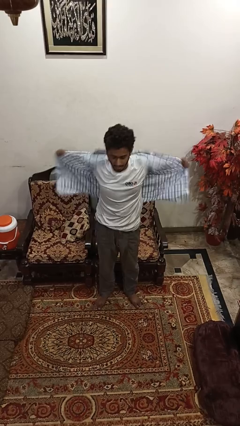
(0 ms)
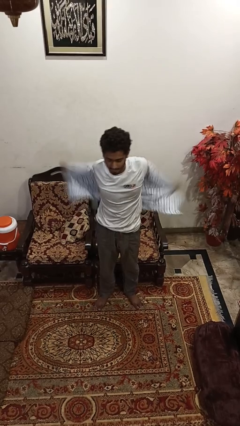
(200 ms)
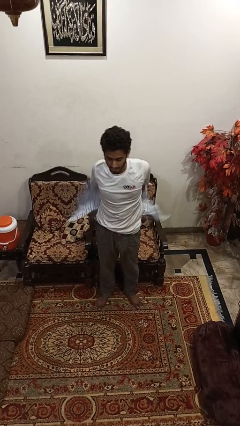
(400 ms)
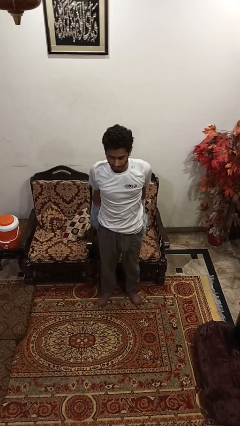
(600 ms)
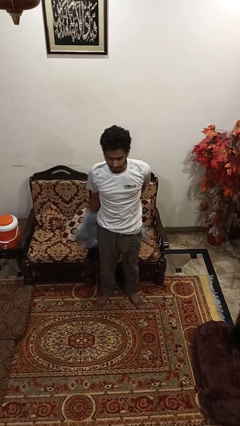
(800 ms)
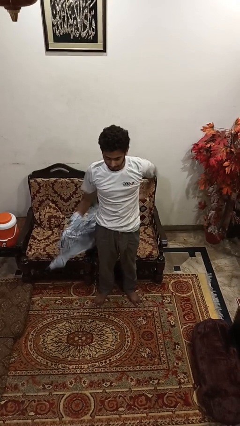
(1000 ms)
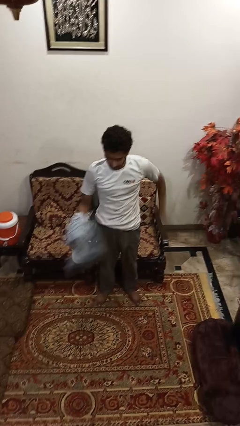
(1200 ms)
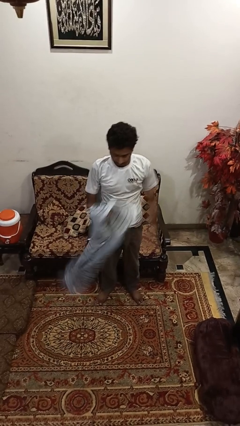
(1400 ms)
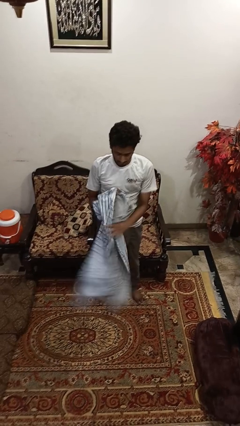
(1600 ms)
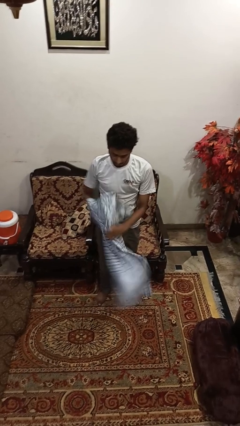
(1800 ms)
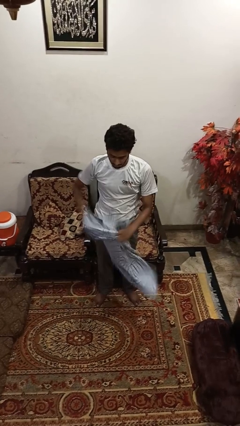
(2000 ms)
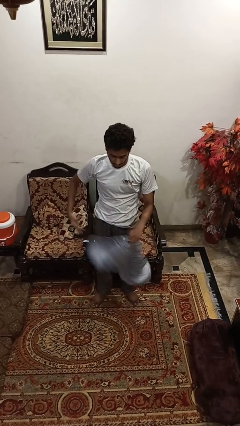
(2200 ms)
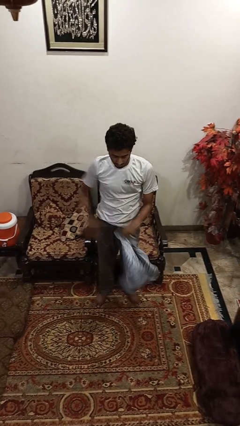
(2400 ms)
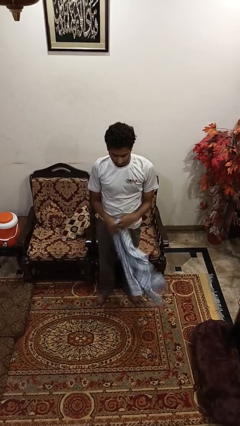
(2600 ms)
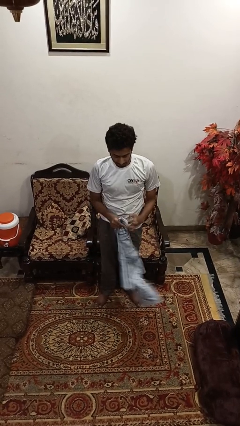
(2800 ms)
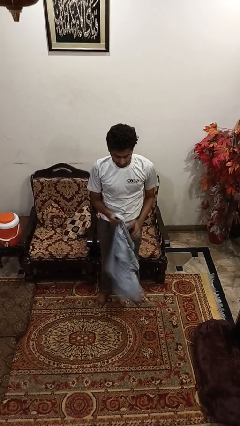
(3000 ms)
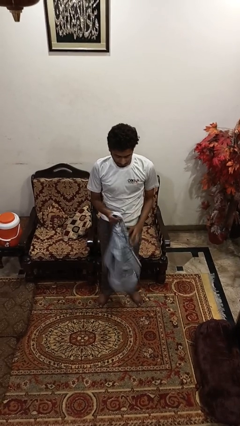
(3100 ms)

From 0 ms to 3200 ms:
person takes off shirt

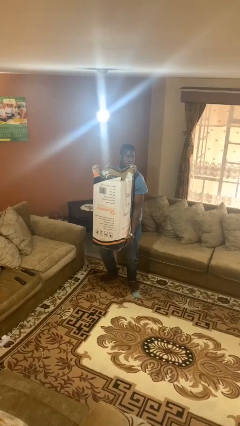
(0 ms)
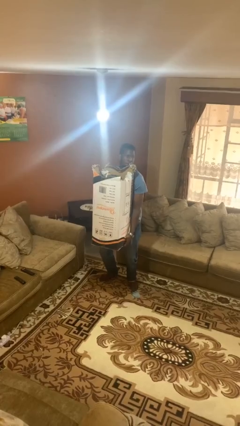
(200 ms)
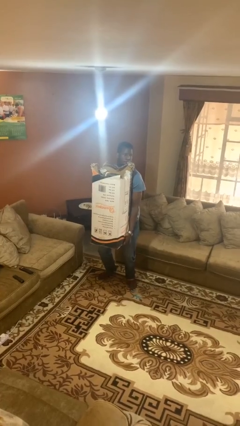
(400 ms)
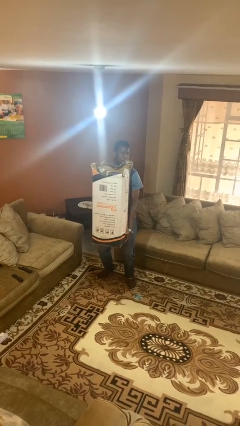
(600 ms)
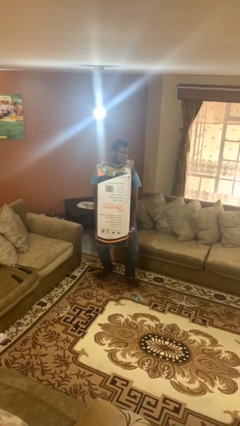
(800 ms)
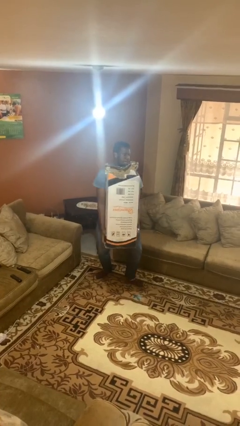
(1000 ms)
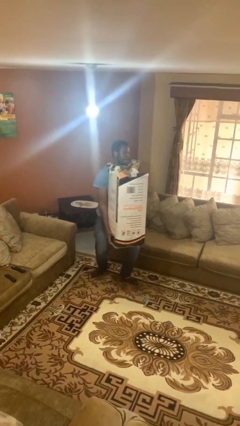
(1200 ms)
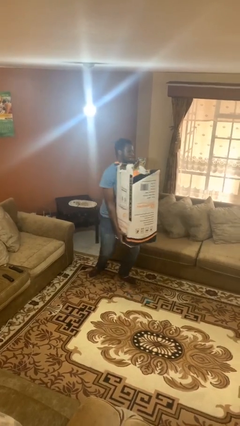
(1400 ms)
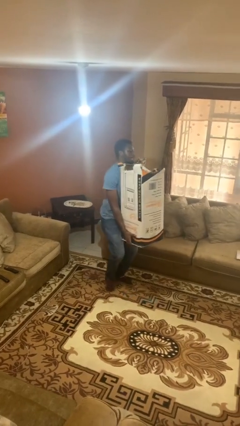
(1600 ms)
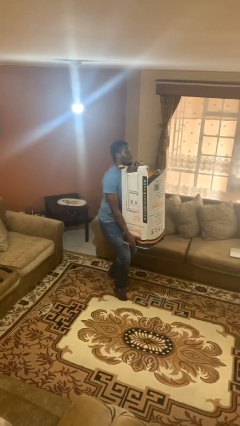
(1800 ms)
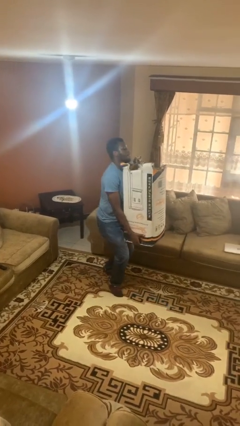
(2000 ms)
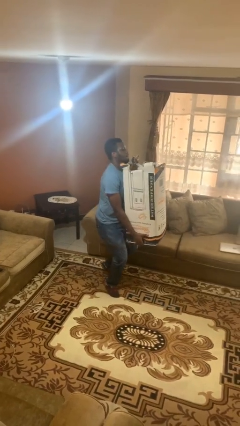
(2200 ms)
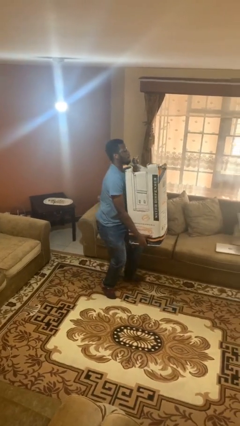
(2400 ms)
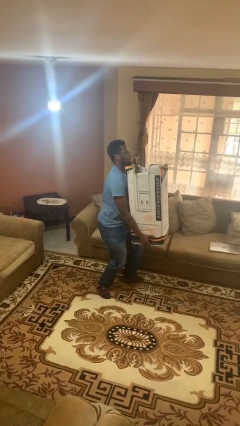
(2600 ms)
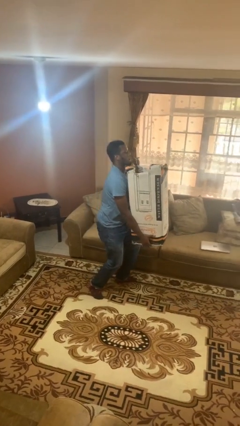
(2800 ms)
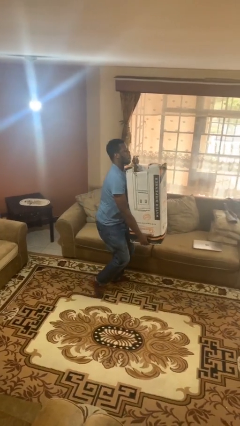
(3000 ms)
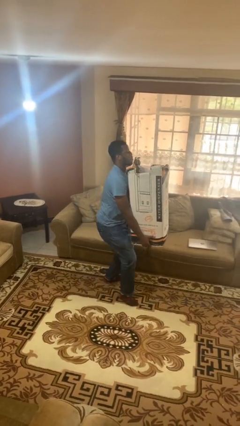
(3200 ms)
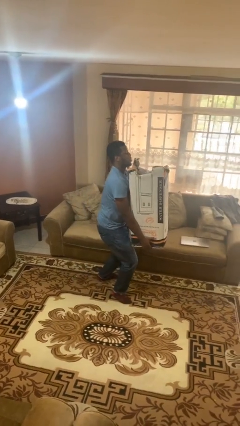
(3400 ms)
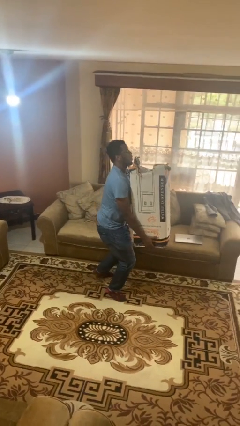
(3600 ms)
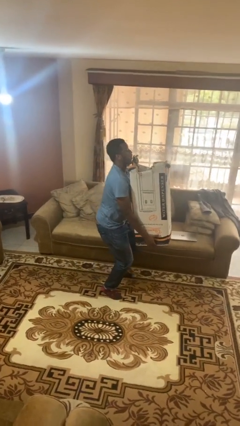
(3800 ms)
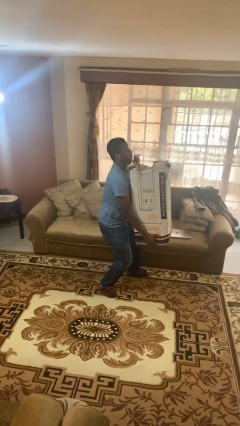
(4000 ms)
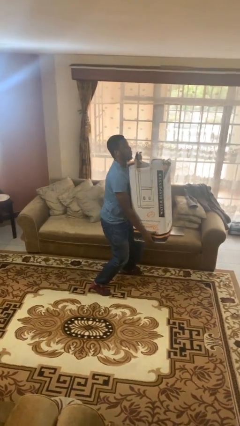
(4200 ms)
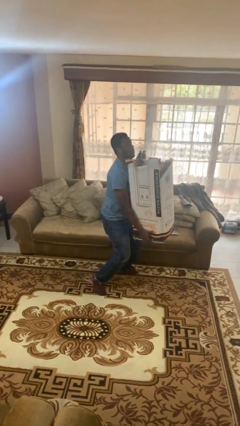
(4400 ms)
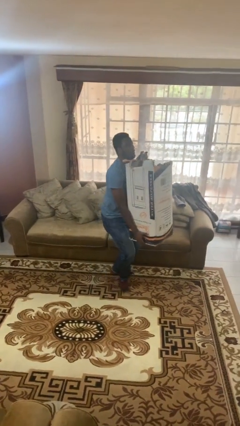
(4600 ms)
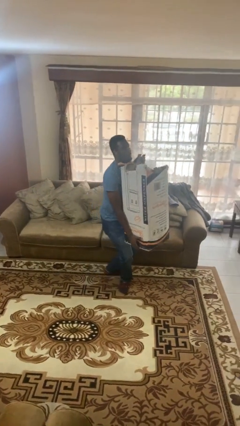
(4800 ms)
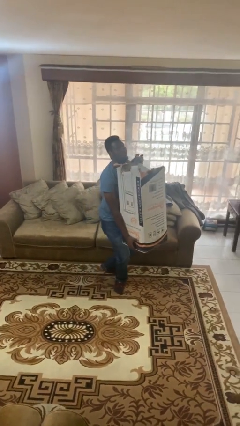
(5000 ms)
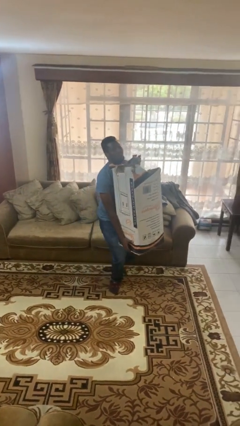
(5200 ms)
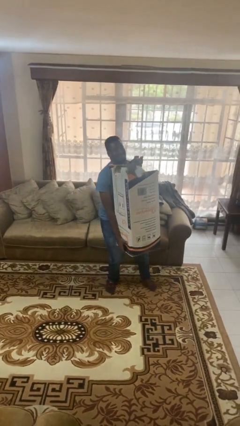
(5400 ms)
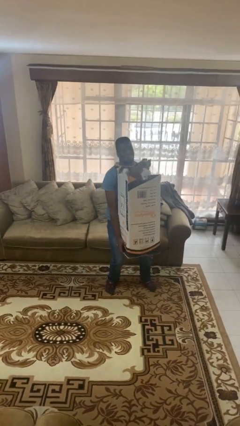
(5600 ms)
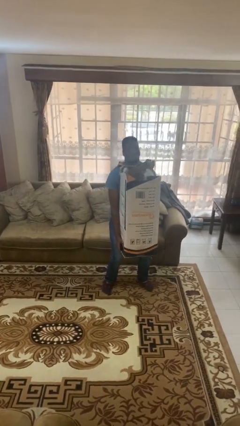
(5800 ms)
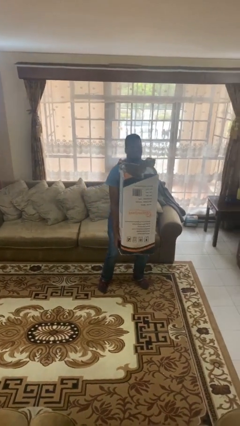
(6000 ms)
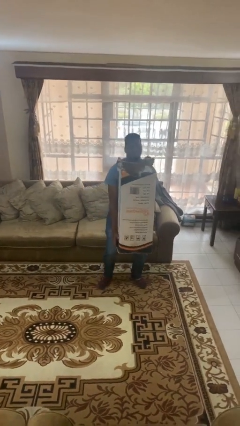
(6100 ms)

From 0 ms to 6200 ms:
person carries heavy object

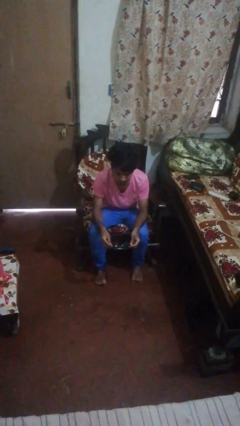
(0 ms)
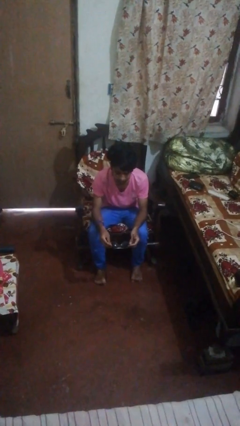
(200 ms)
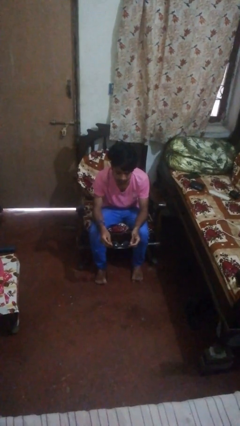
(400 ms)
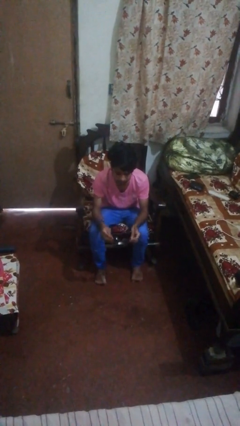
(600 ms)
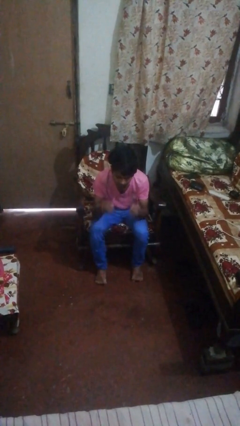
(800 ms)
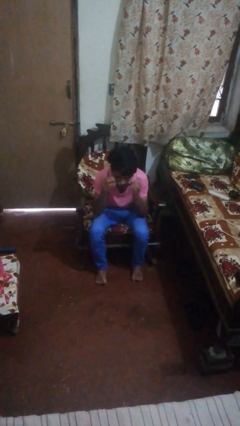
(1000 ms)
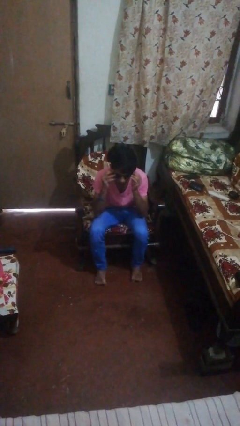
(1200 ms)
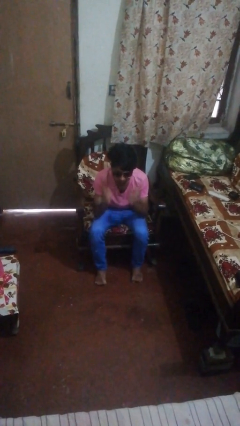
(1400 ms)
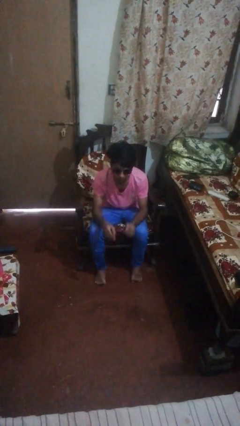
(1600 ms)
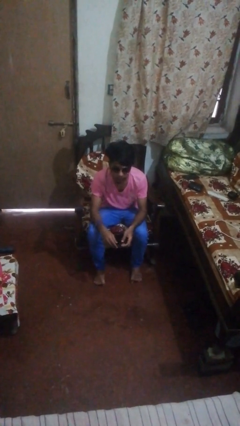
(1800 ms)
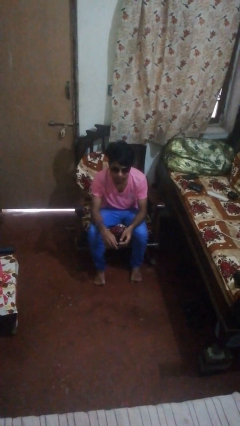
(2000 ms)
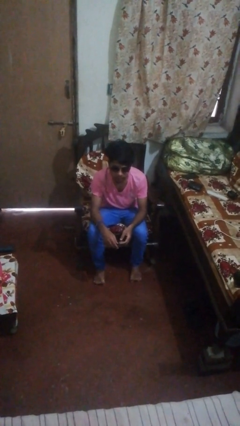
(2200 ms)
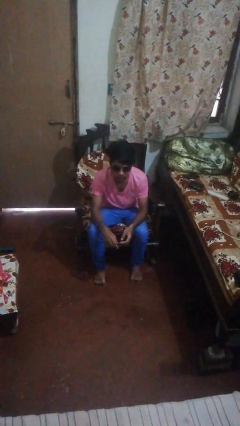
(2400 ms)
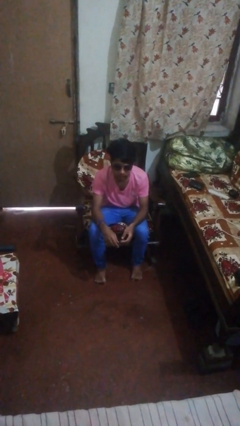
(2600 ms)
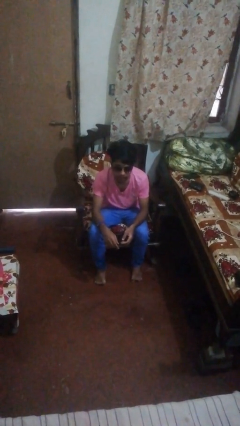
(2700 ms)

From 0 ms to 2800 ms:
person puts on sunglasses

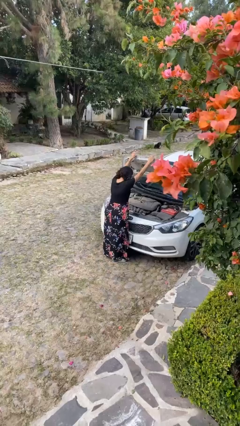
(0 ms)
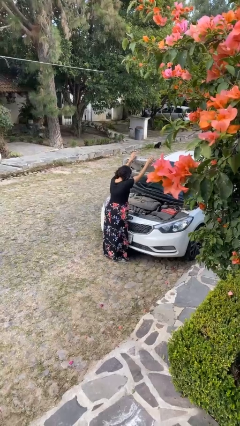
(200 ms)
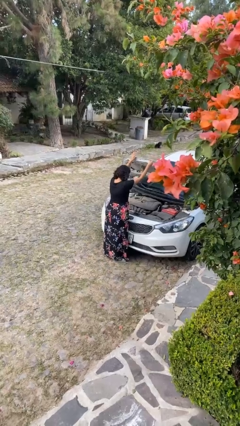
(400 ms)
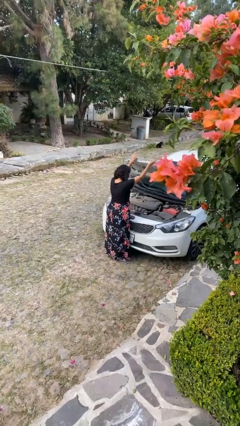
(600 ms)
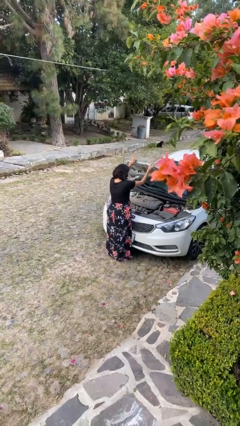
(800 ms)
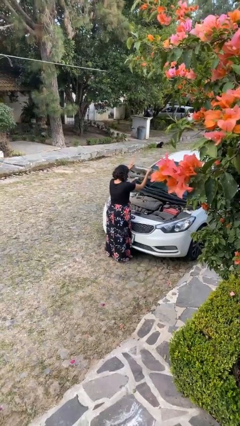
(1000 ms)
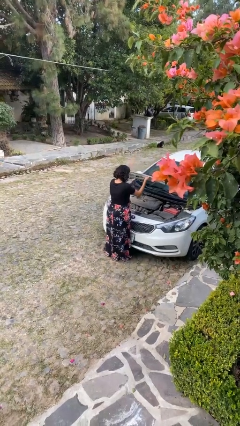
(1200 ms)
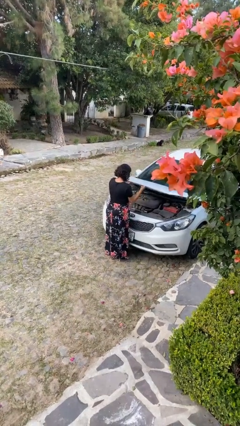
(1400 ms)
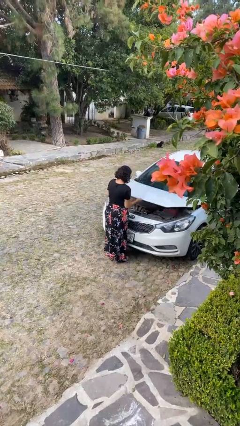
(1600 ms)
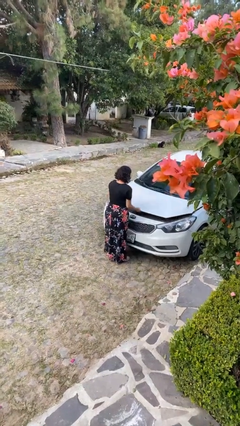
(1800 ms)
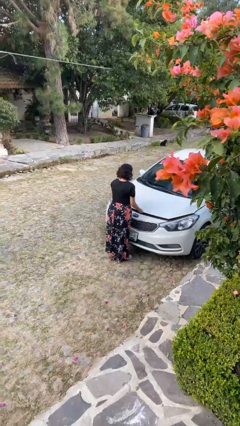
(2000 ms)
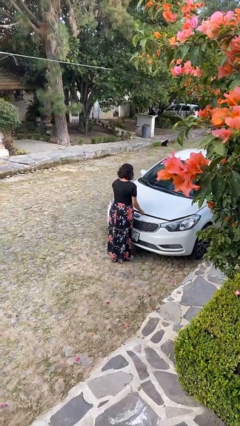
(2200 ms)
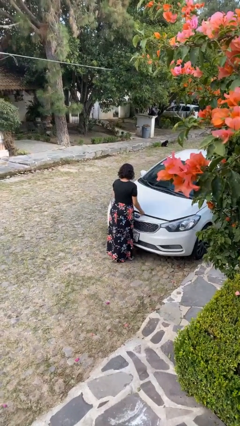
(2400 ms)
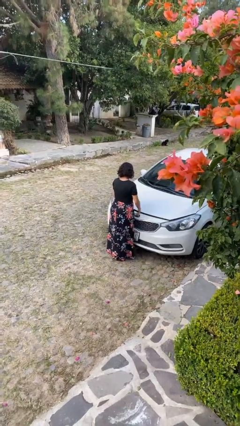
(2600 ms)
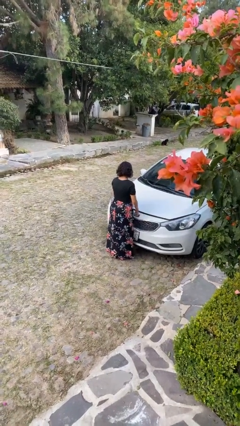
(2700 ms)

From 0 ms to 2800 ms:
person closes car hood

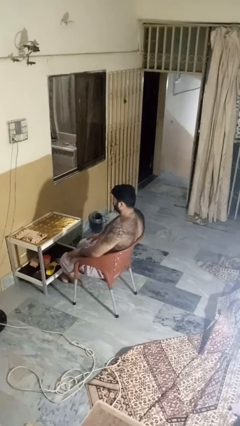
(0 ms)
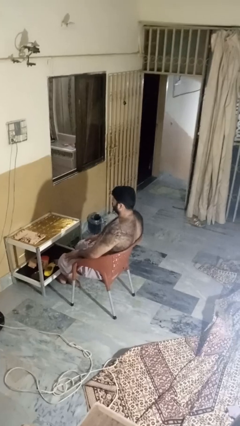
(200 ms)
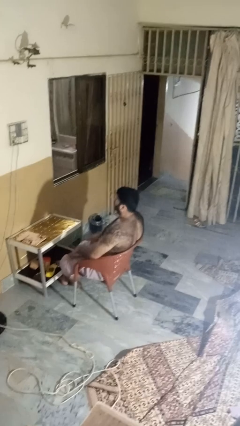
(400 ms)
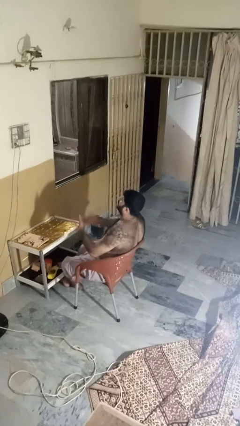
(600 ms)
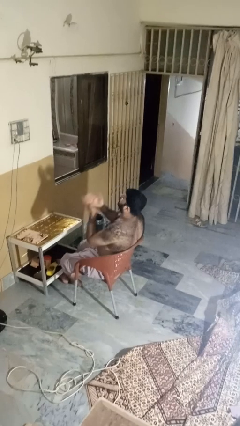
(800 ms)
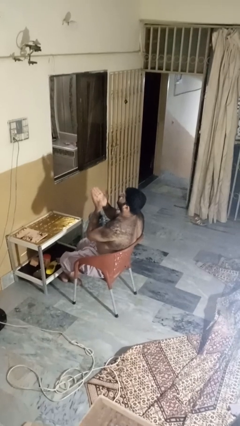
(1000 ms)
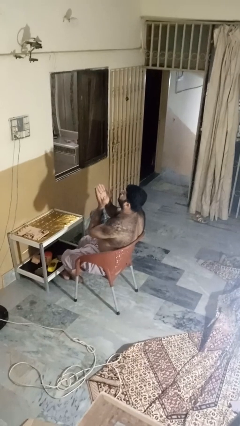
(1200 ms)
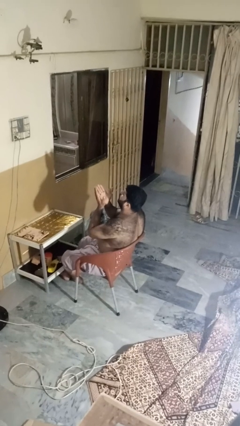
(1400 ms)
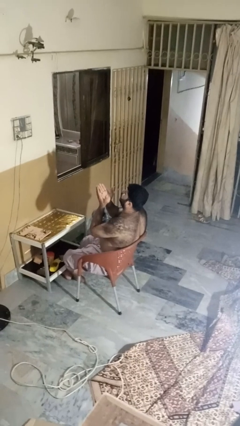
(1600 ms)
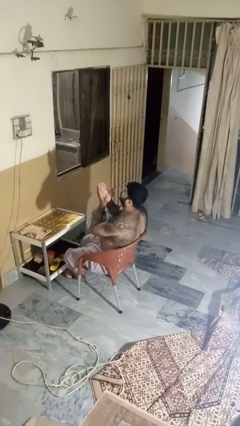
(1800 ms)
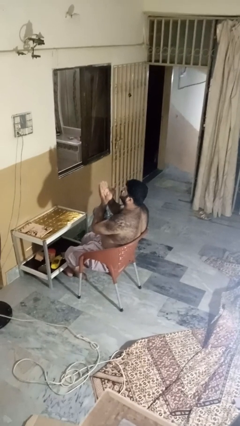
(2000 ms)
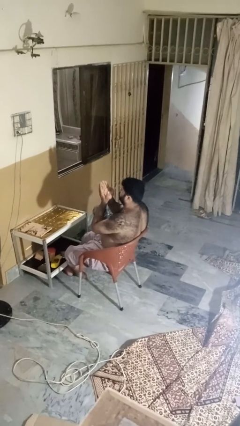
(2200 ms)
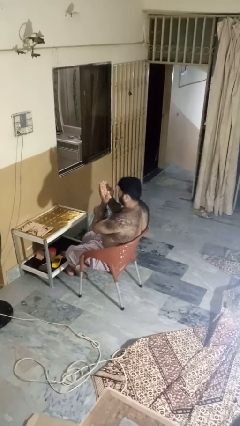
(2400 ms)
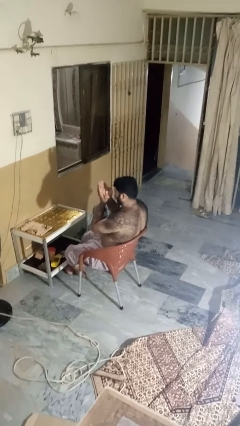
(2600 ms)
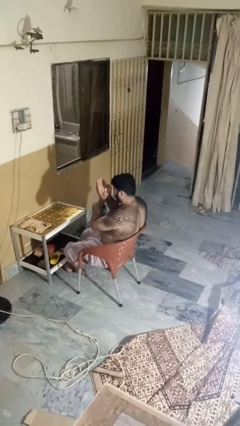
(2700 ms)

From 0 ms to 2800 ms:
person prays
